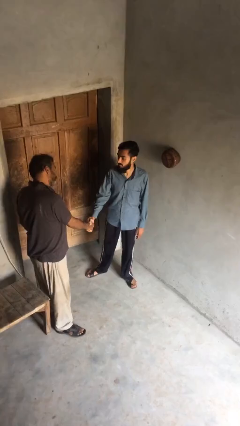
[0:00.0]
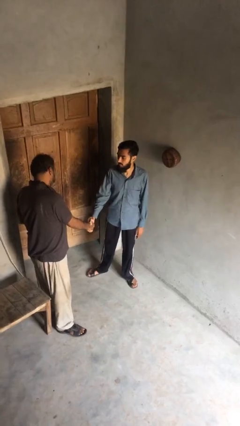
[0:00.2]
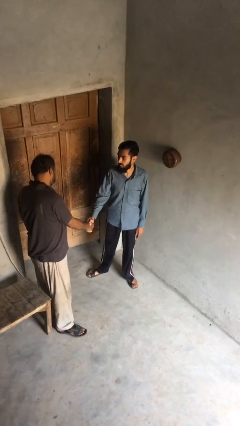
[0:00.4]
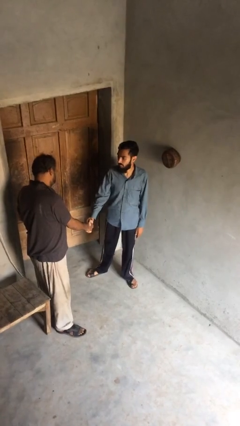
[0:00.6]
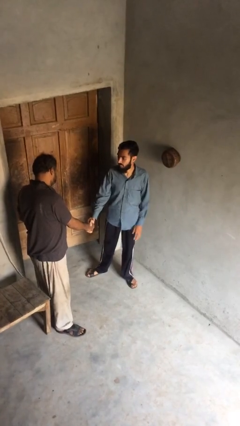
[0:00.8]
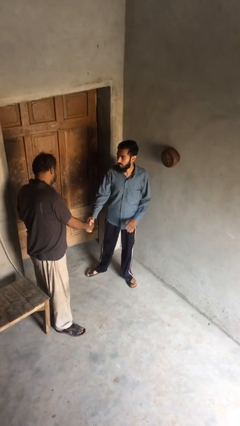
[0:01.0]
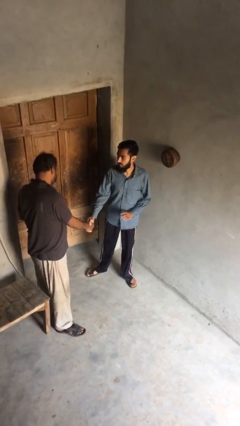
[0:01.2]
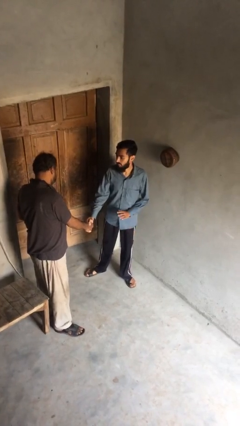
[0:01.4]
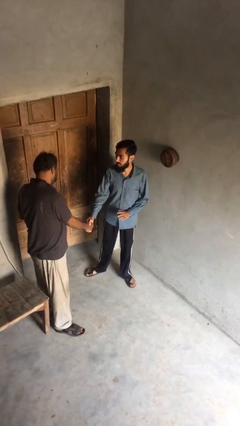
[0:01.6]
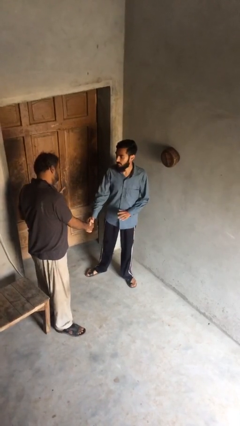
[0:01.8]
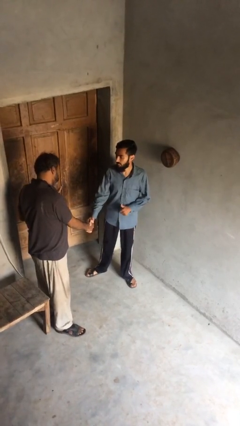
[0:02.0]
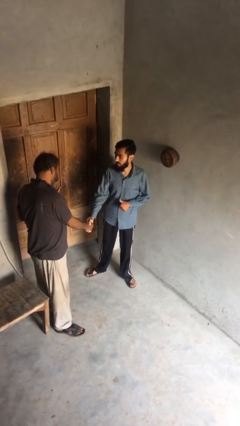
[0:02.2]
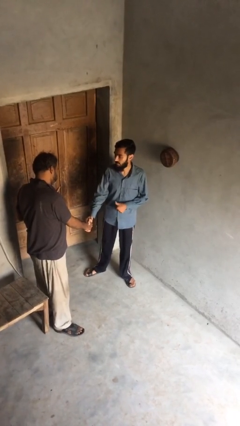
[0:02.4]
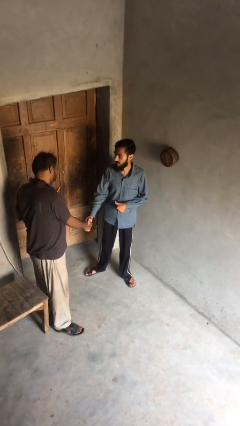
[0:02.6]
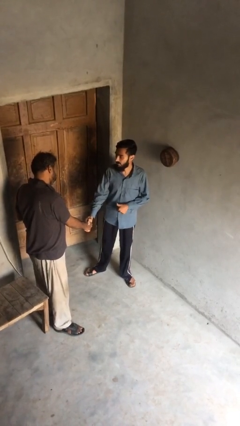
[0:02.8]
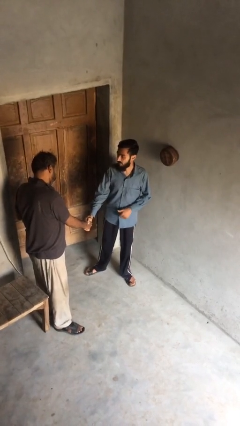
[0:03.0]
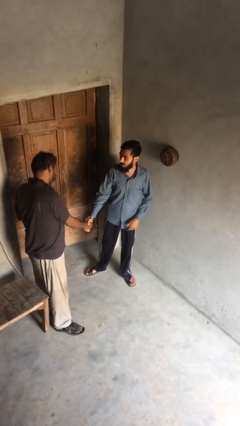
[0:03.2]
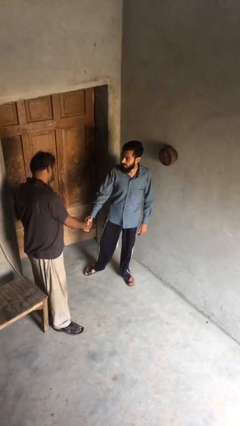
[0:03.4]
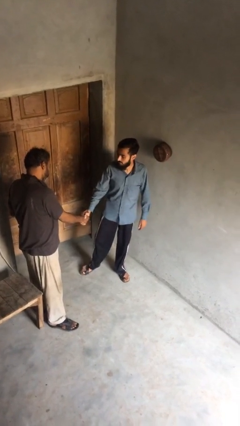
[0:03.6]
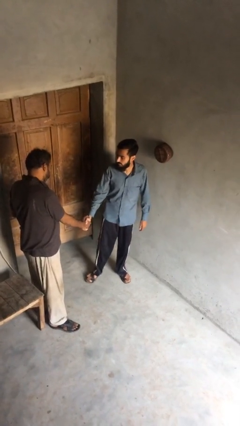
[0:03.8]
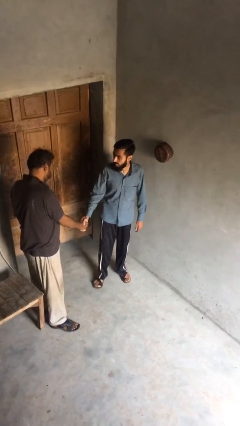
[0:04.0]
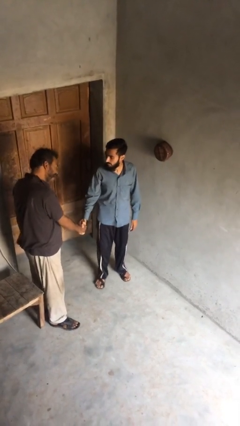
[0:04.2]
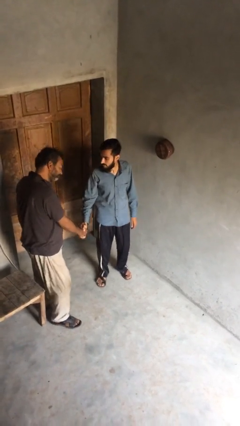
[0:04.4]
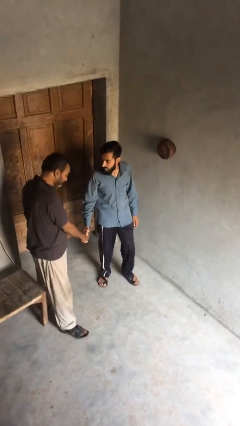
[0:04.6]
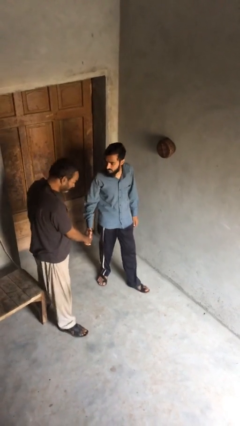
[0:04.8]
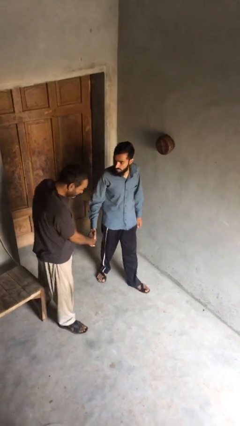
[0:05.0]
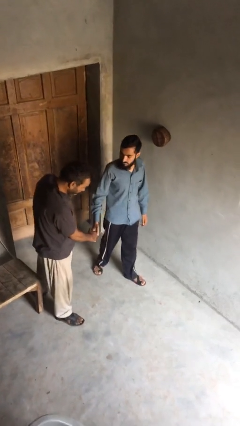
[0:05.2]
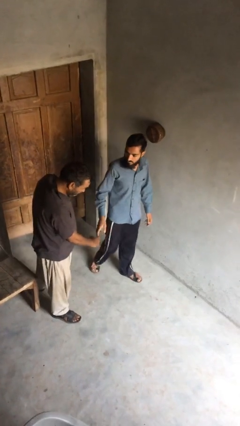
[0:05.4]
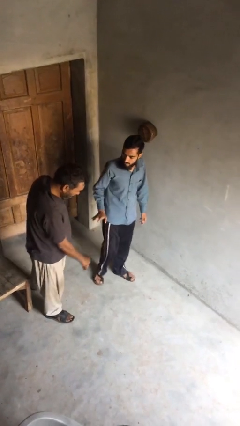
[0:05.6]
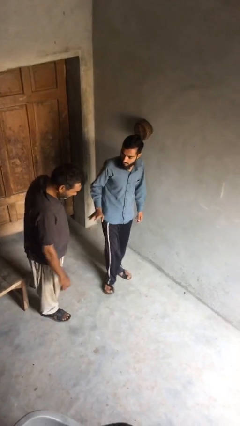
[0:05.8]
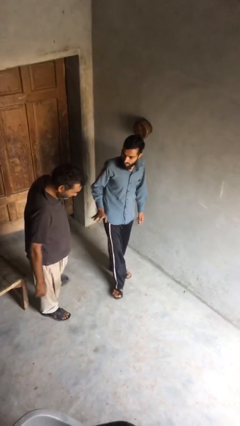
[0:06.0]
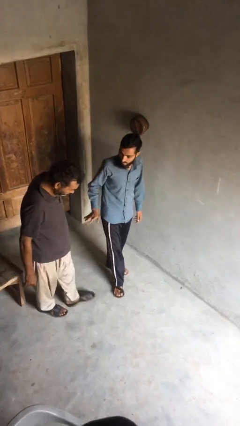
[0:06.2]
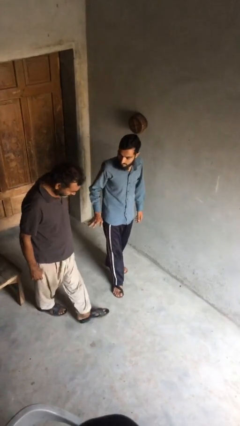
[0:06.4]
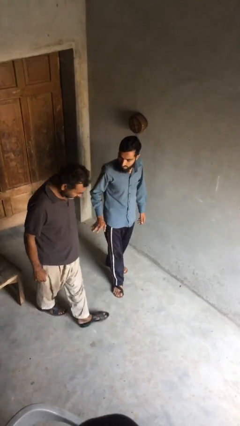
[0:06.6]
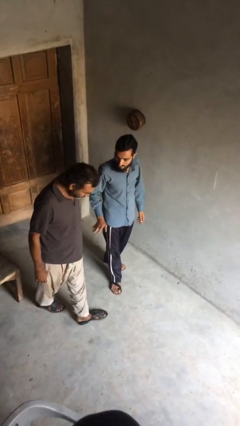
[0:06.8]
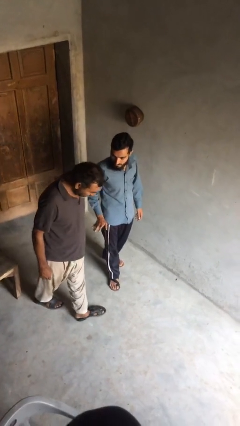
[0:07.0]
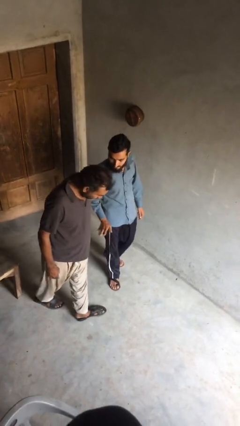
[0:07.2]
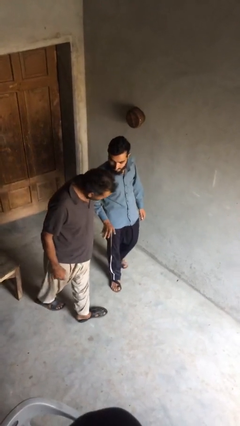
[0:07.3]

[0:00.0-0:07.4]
person talks to person

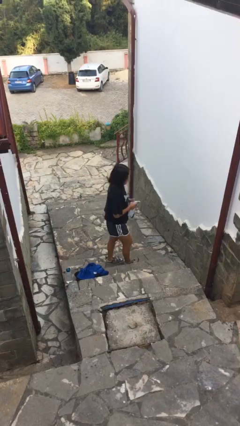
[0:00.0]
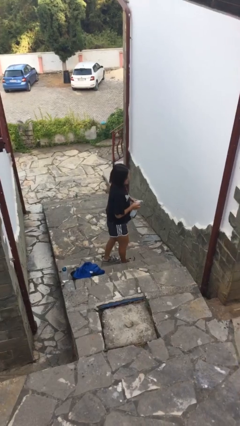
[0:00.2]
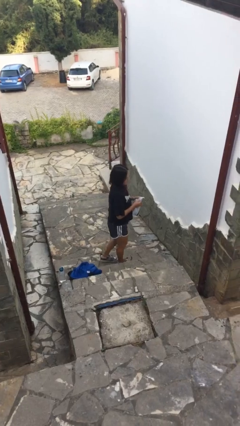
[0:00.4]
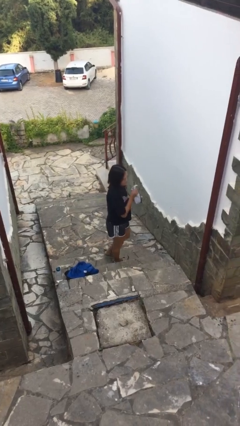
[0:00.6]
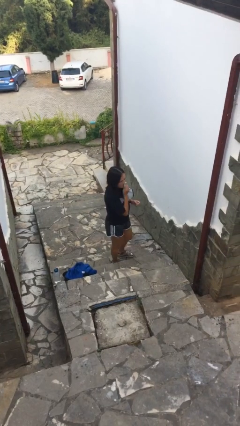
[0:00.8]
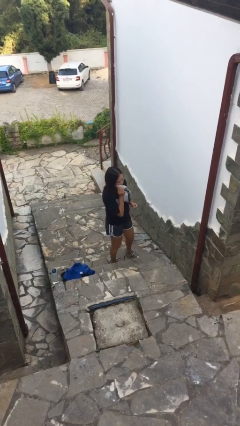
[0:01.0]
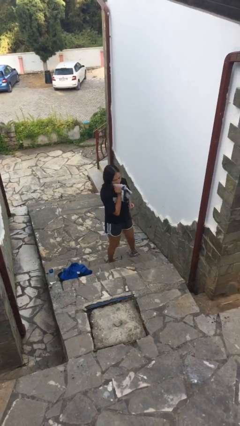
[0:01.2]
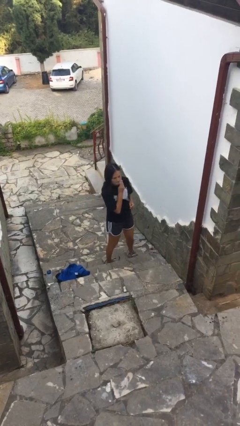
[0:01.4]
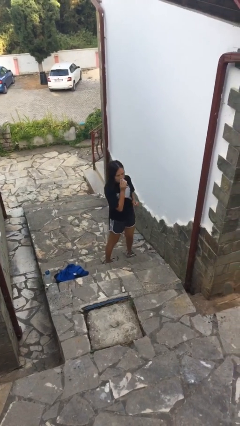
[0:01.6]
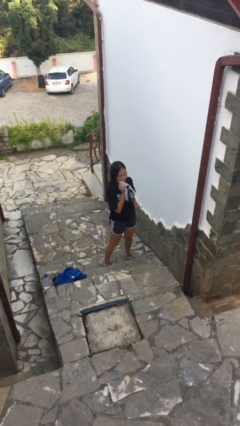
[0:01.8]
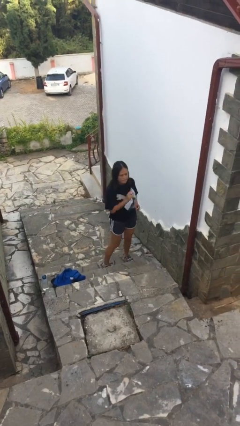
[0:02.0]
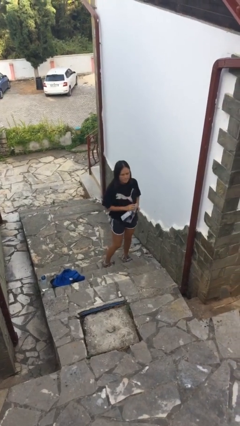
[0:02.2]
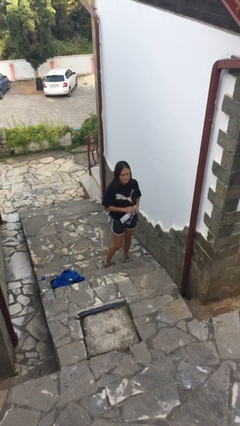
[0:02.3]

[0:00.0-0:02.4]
person wipes mouth with napkin

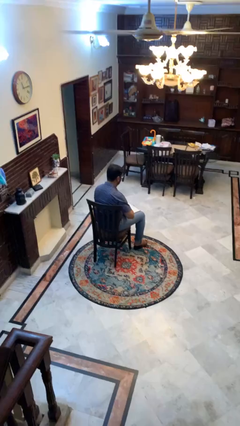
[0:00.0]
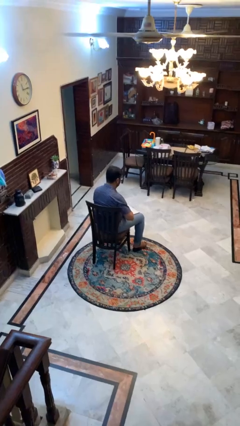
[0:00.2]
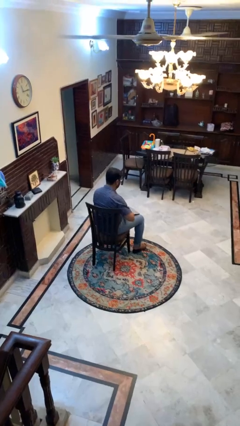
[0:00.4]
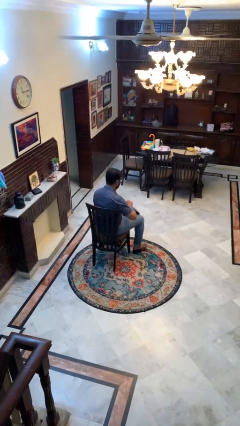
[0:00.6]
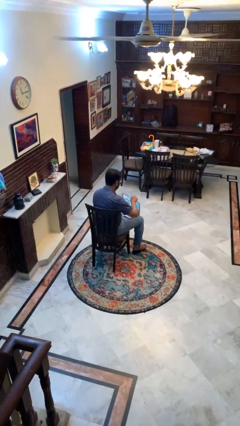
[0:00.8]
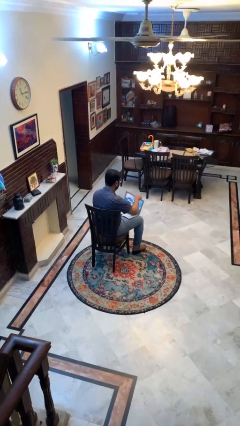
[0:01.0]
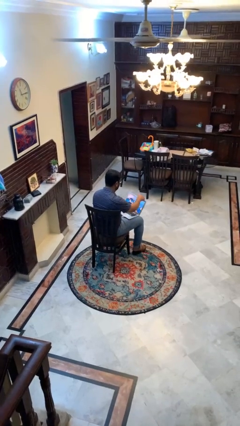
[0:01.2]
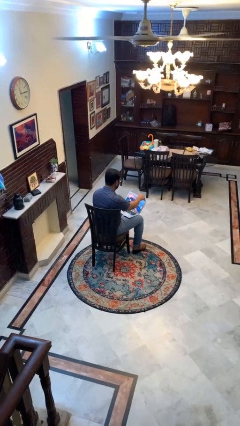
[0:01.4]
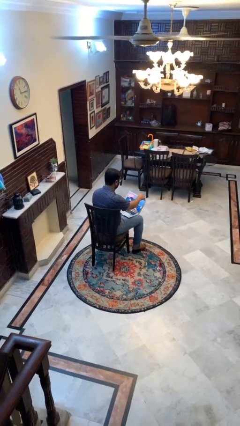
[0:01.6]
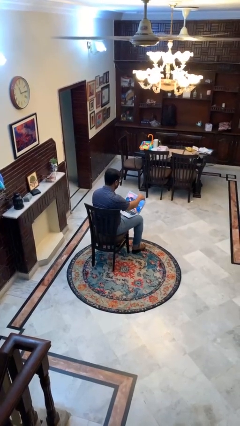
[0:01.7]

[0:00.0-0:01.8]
person opens laptop

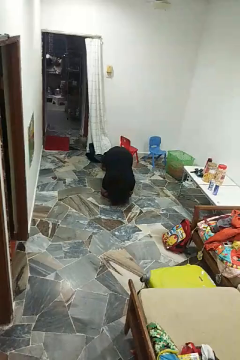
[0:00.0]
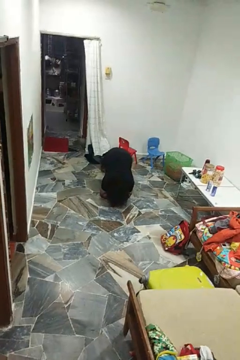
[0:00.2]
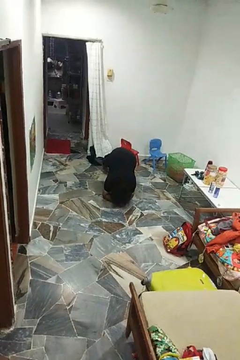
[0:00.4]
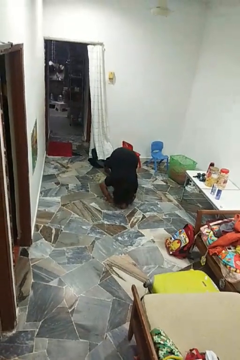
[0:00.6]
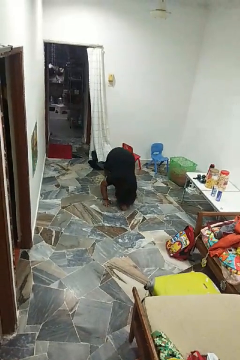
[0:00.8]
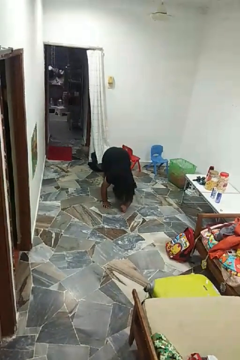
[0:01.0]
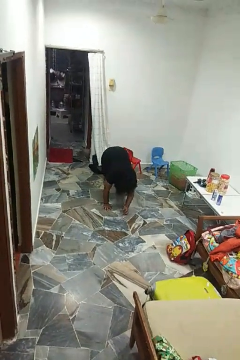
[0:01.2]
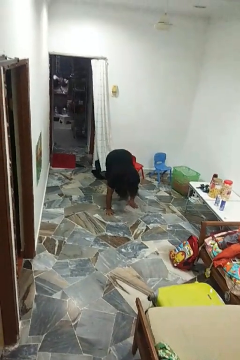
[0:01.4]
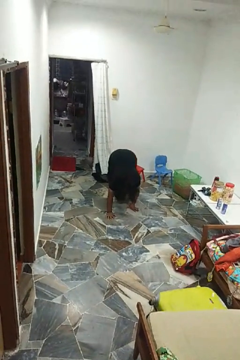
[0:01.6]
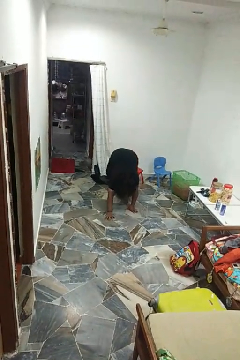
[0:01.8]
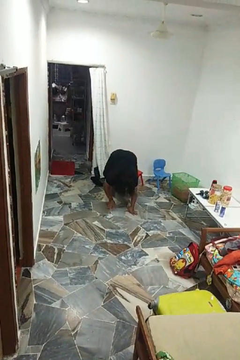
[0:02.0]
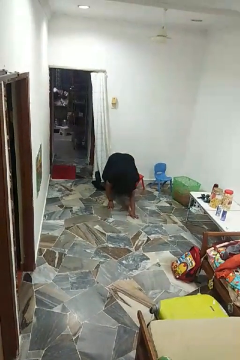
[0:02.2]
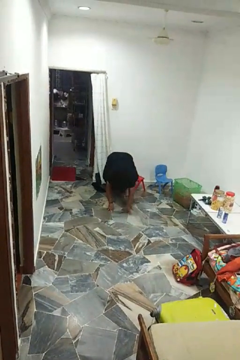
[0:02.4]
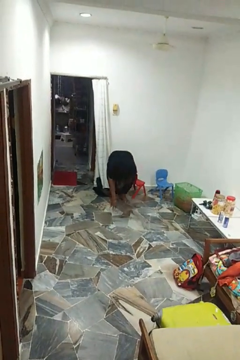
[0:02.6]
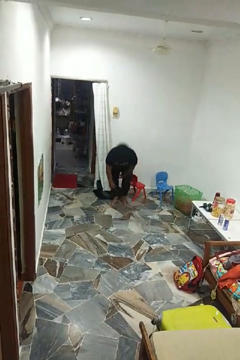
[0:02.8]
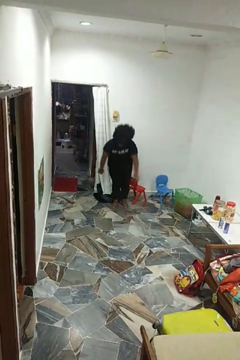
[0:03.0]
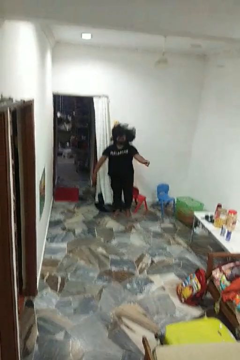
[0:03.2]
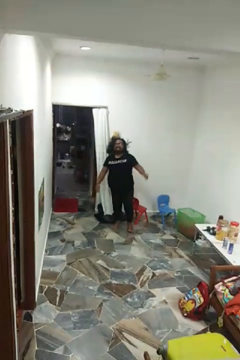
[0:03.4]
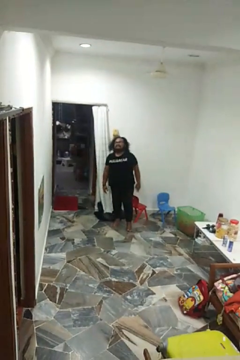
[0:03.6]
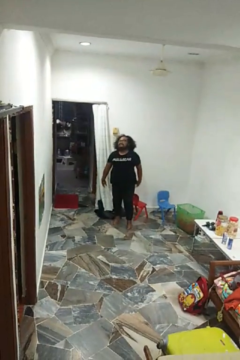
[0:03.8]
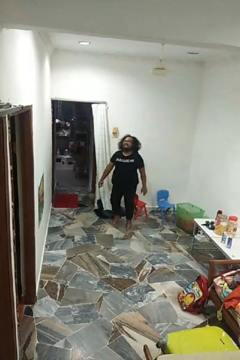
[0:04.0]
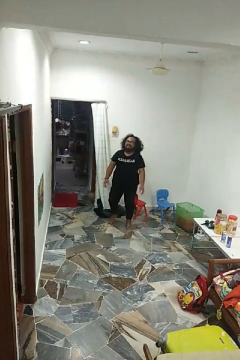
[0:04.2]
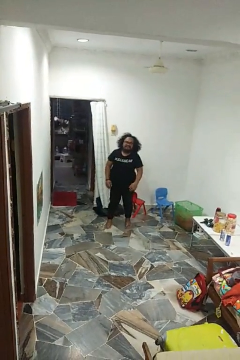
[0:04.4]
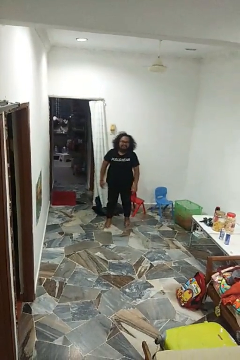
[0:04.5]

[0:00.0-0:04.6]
person stands up from floor

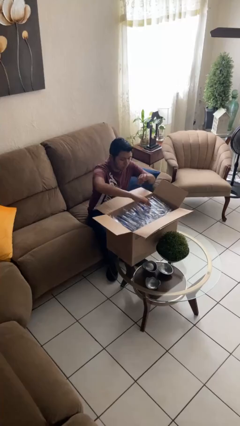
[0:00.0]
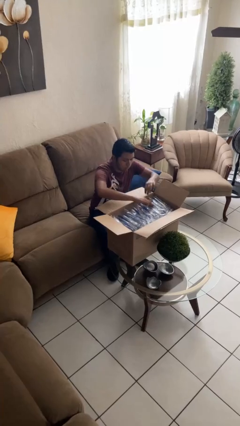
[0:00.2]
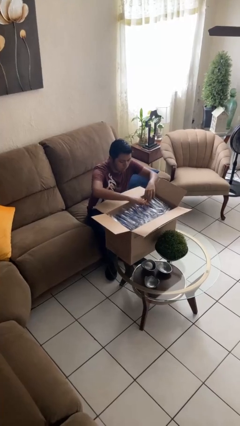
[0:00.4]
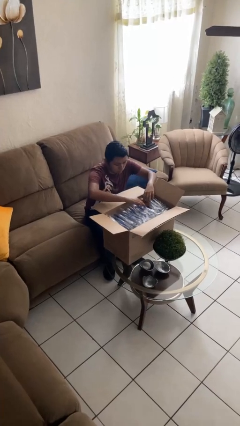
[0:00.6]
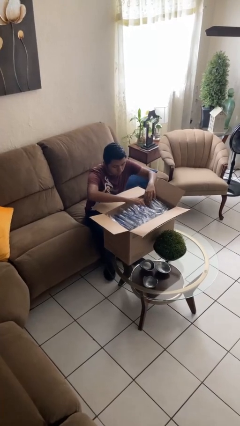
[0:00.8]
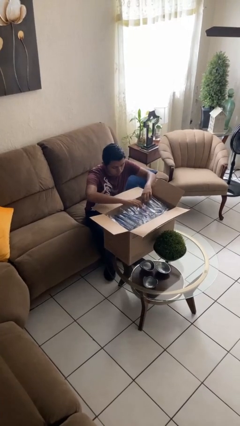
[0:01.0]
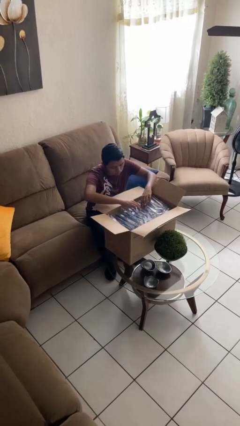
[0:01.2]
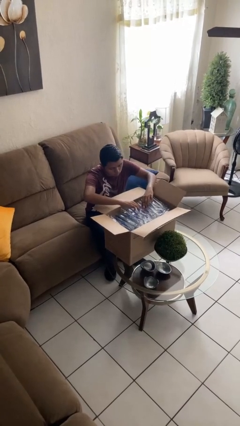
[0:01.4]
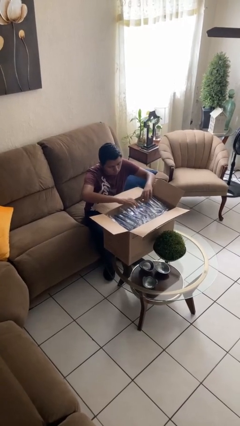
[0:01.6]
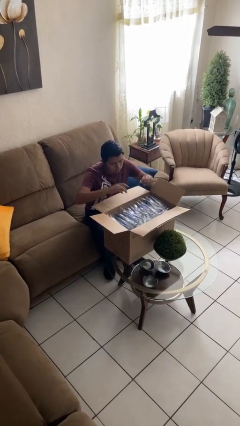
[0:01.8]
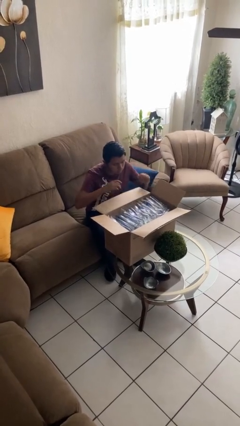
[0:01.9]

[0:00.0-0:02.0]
person searches in box

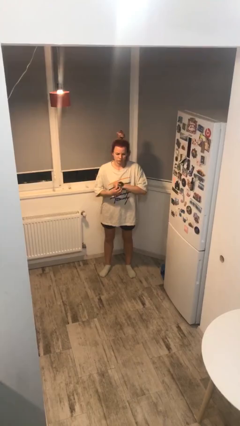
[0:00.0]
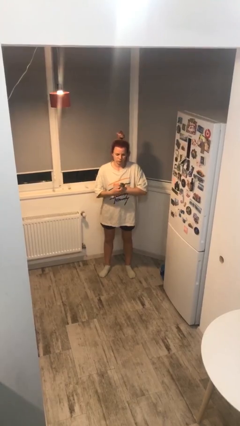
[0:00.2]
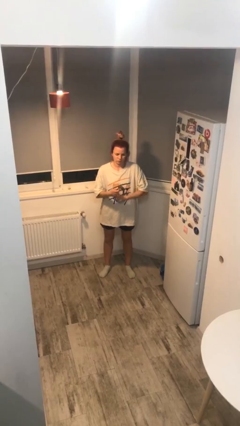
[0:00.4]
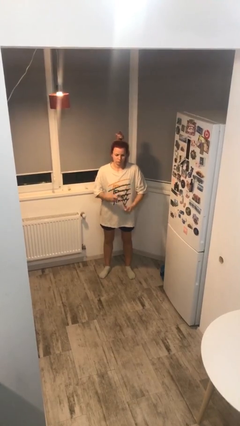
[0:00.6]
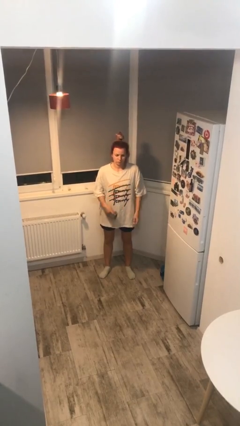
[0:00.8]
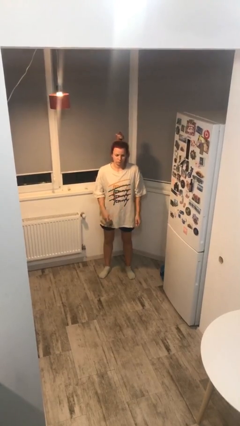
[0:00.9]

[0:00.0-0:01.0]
person takes off wristwatch
